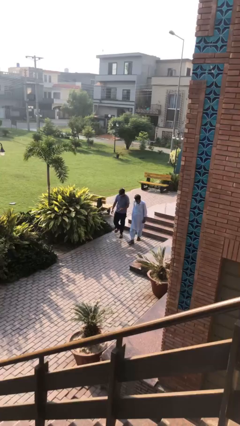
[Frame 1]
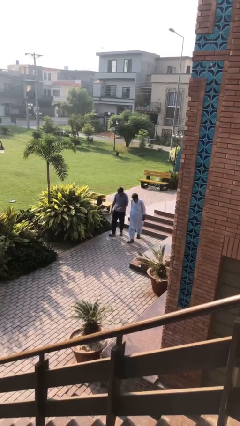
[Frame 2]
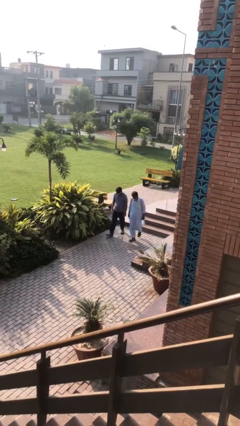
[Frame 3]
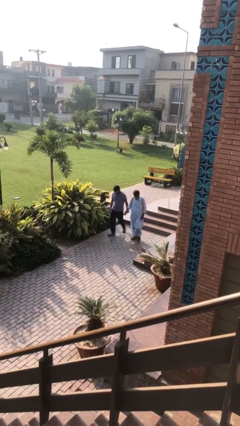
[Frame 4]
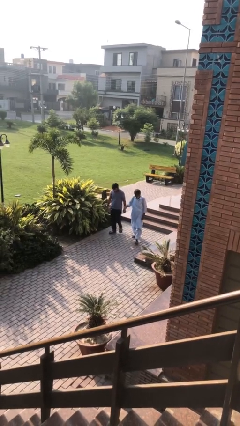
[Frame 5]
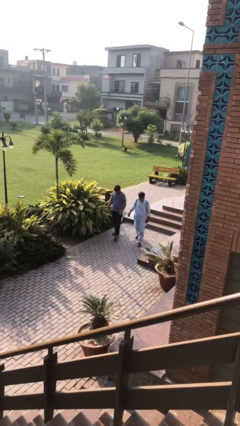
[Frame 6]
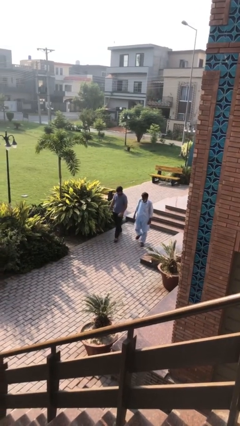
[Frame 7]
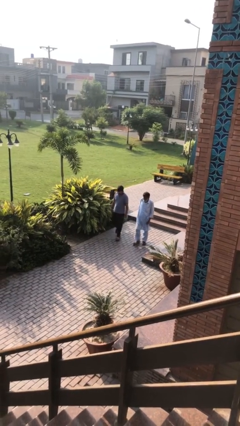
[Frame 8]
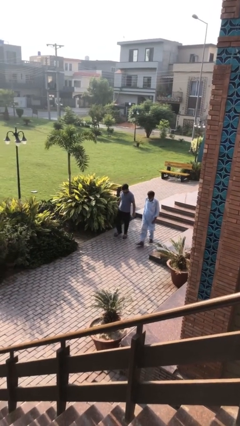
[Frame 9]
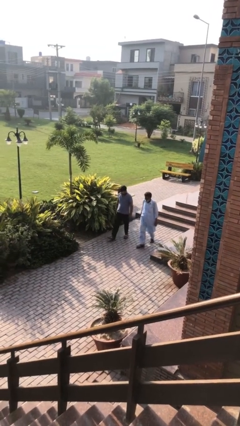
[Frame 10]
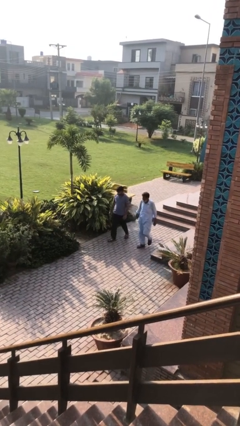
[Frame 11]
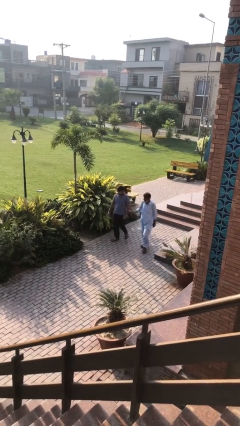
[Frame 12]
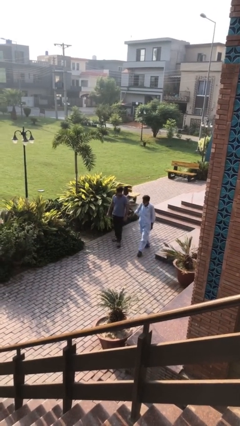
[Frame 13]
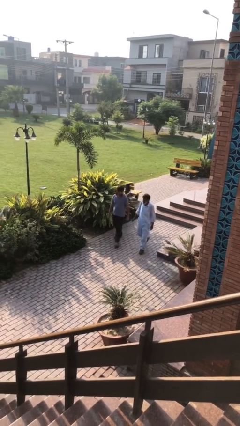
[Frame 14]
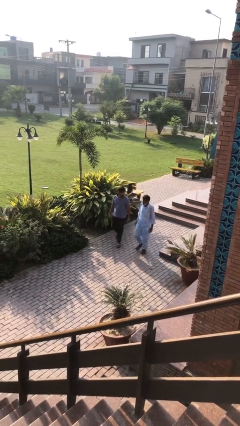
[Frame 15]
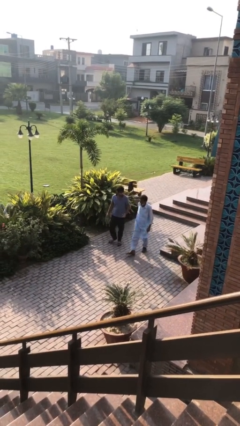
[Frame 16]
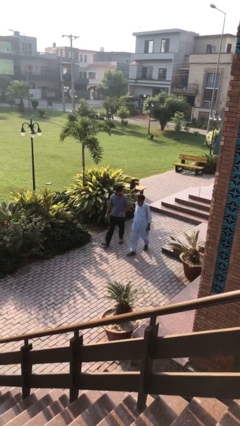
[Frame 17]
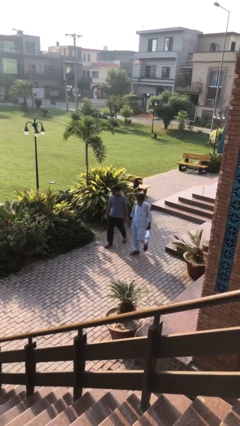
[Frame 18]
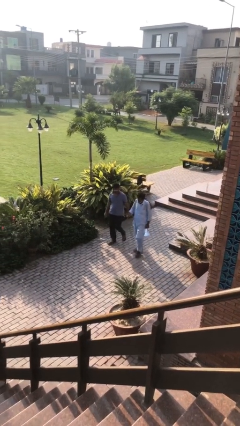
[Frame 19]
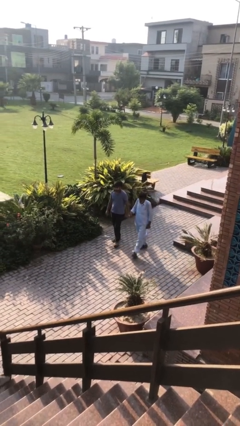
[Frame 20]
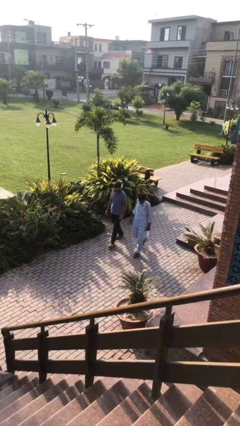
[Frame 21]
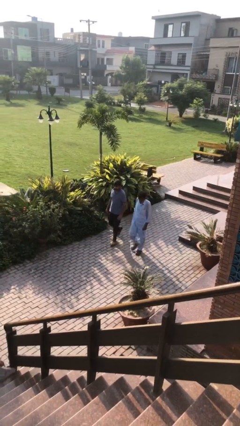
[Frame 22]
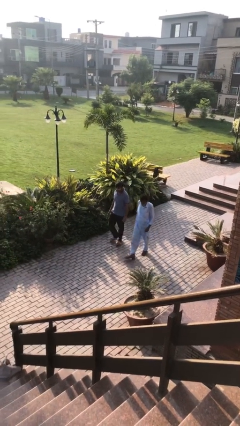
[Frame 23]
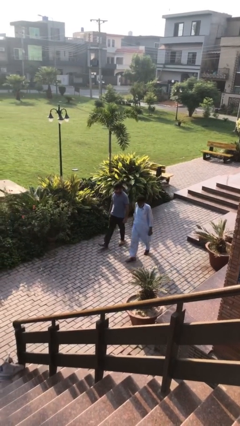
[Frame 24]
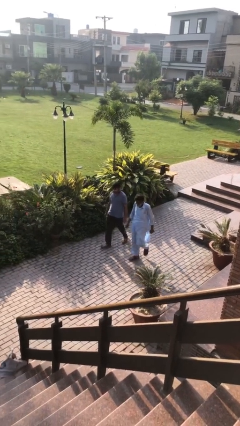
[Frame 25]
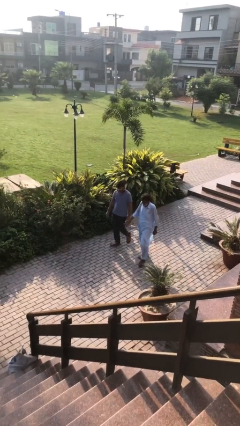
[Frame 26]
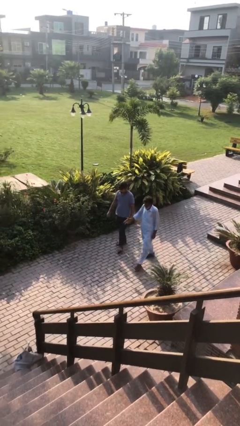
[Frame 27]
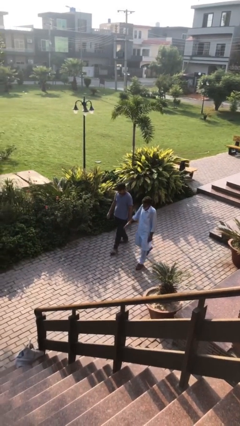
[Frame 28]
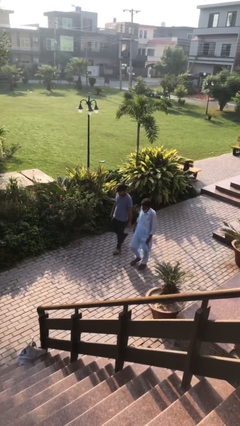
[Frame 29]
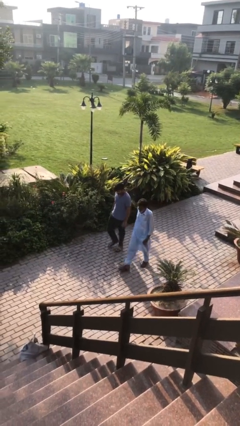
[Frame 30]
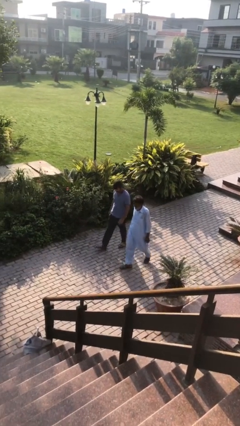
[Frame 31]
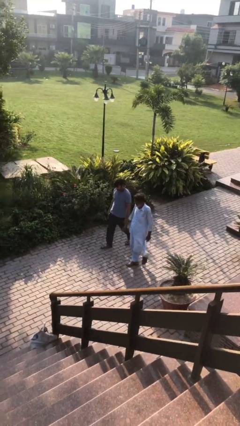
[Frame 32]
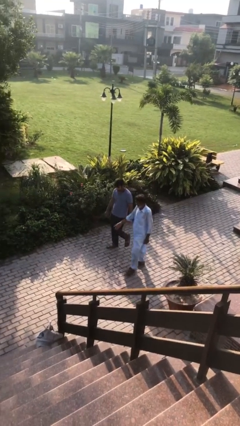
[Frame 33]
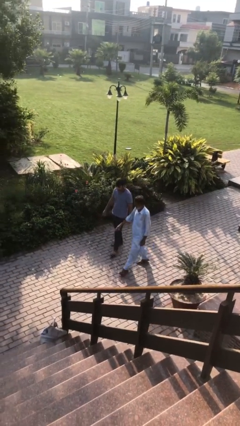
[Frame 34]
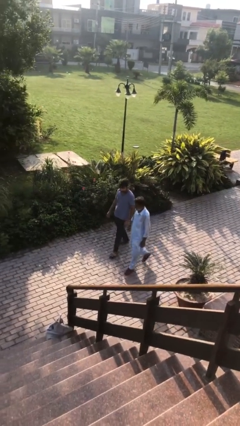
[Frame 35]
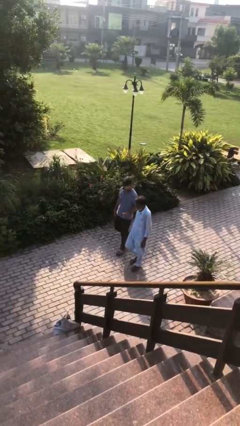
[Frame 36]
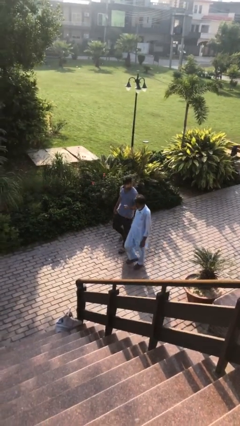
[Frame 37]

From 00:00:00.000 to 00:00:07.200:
person talks to person

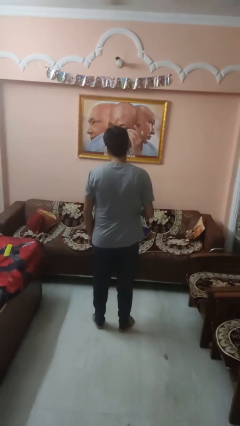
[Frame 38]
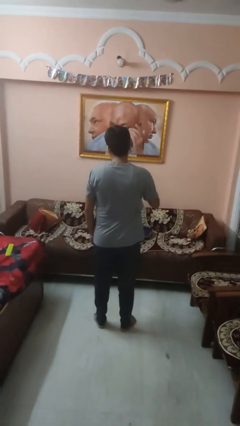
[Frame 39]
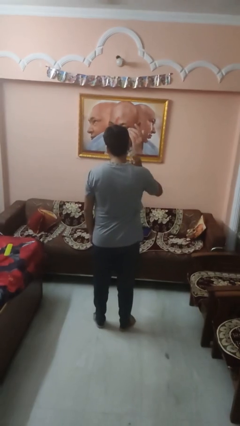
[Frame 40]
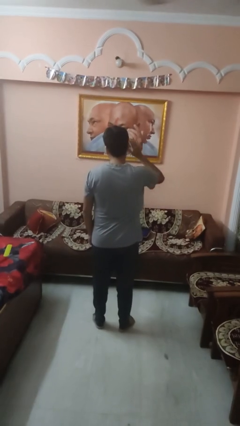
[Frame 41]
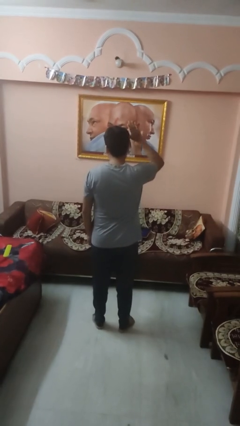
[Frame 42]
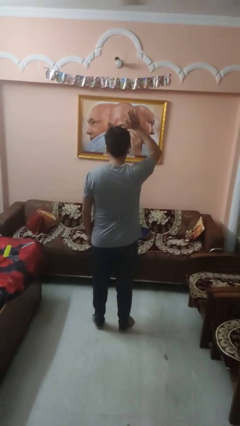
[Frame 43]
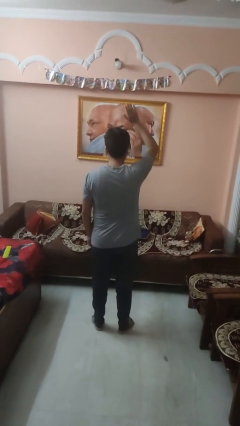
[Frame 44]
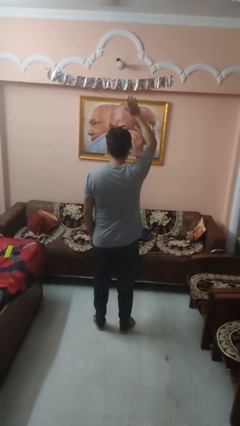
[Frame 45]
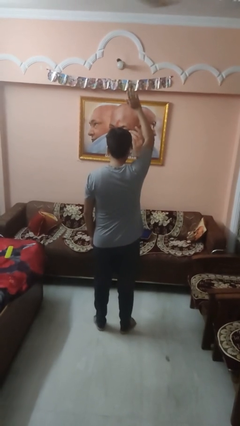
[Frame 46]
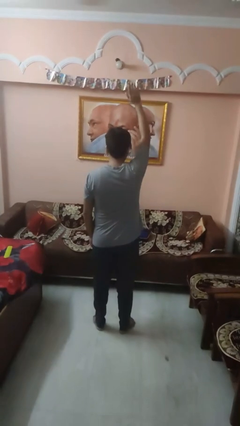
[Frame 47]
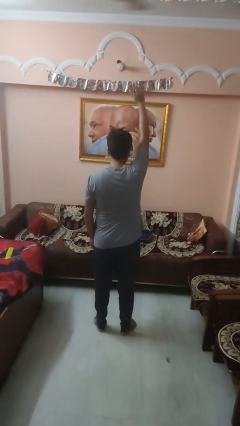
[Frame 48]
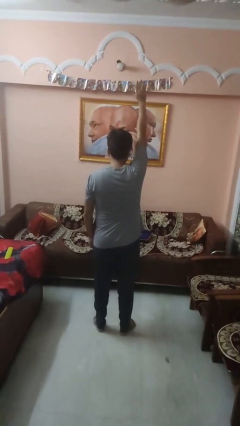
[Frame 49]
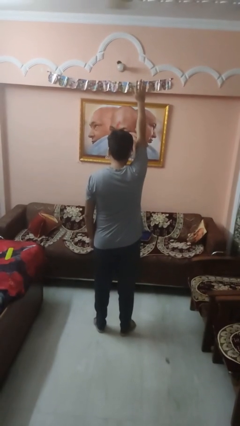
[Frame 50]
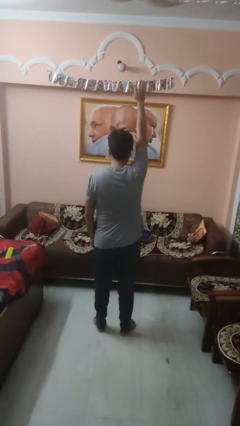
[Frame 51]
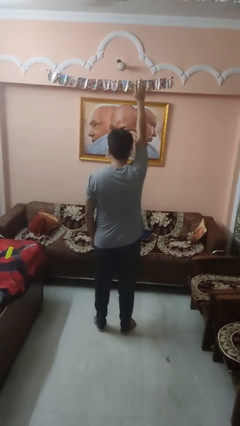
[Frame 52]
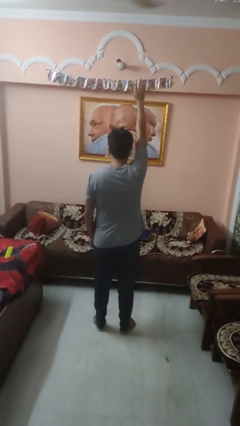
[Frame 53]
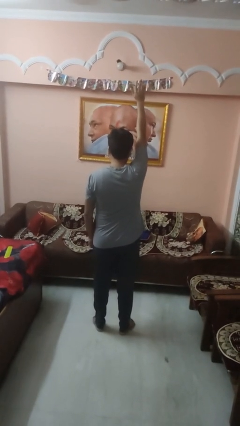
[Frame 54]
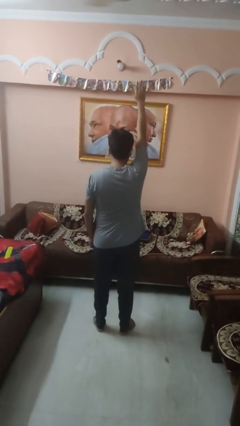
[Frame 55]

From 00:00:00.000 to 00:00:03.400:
person gestures raise hand

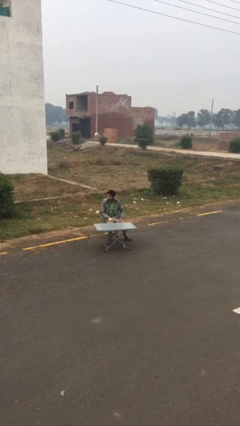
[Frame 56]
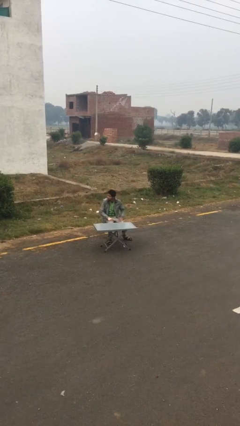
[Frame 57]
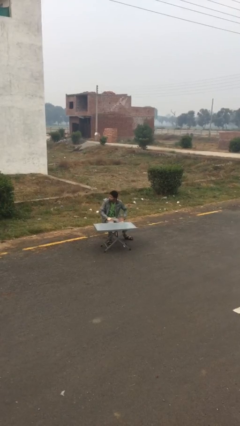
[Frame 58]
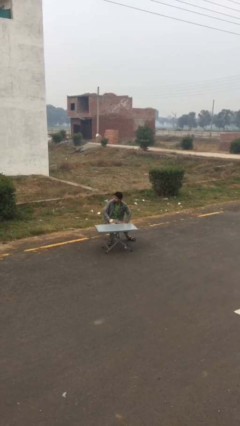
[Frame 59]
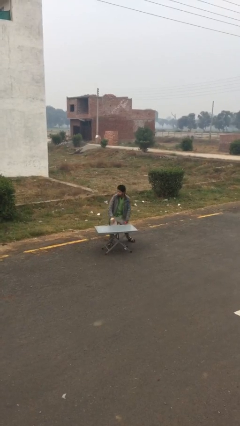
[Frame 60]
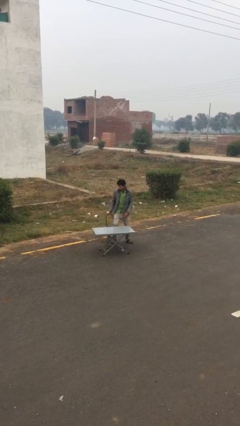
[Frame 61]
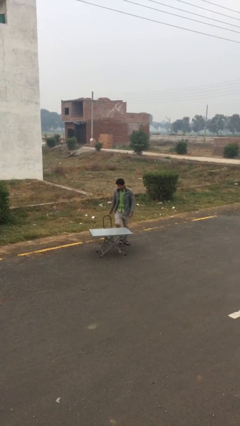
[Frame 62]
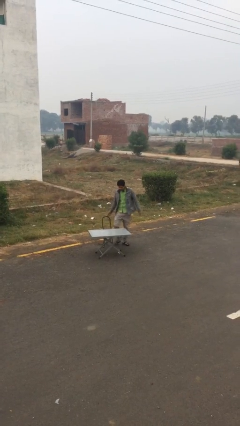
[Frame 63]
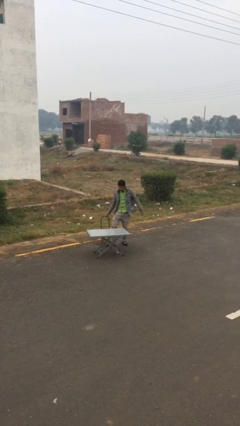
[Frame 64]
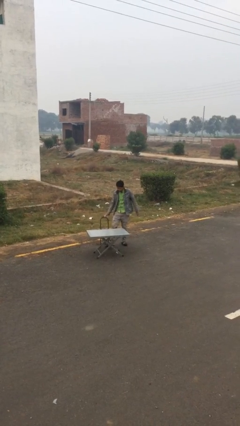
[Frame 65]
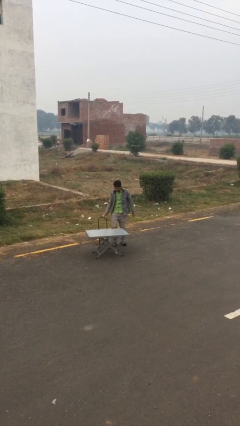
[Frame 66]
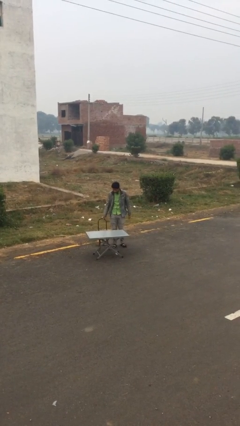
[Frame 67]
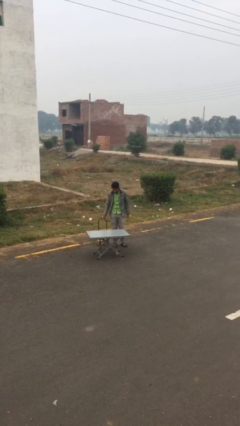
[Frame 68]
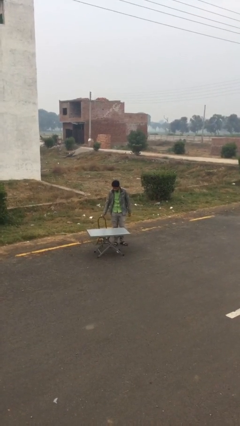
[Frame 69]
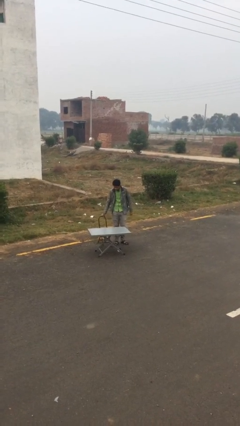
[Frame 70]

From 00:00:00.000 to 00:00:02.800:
person stands up

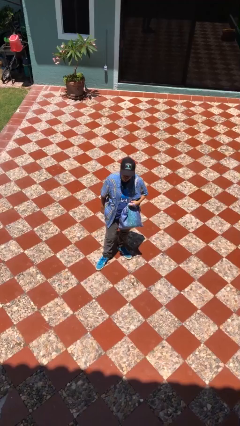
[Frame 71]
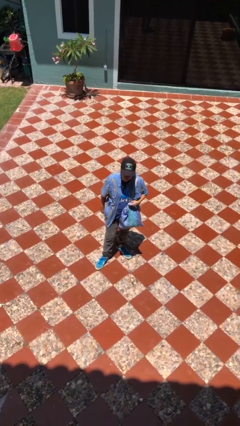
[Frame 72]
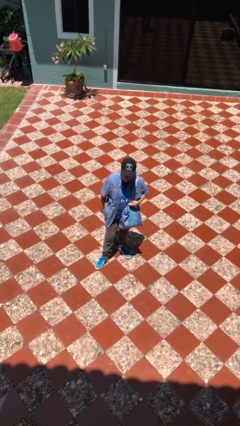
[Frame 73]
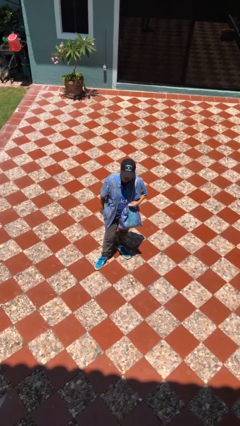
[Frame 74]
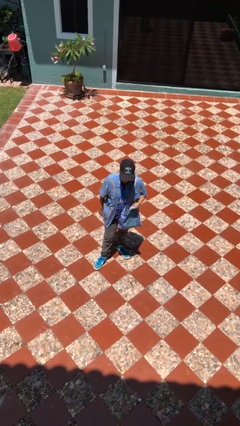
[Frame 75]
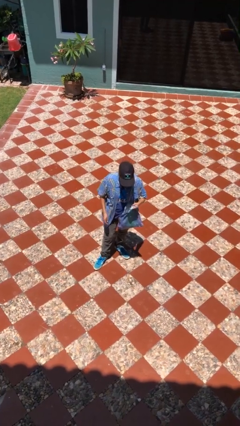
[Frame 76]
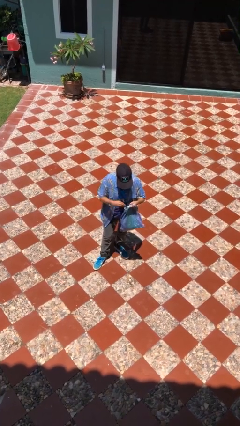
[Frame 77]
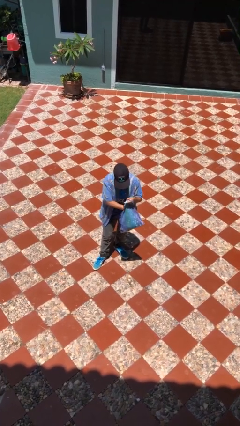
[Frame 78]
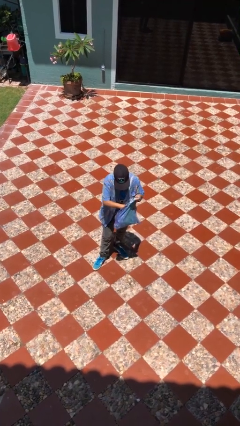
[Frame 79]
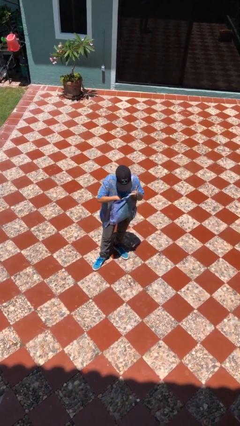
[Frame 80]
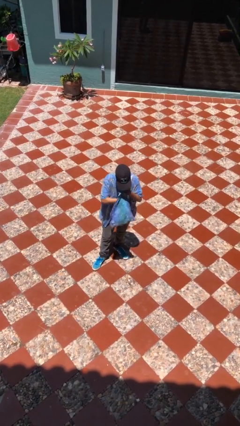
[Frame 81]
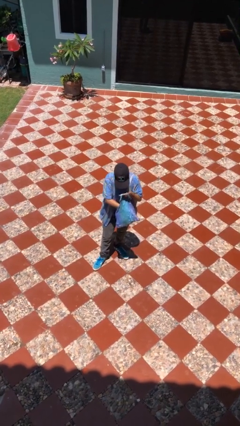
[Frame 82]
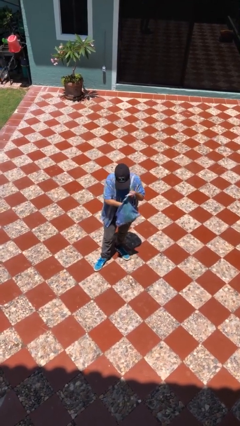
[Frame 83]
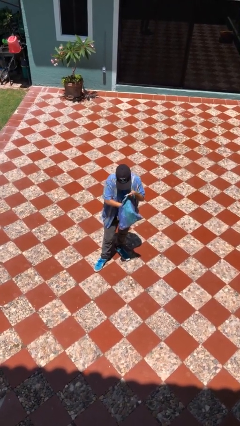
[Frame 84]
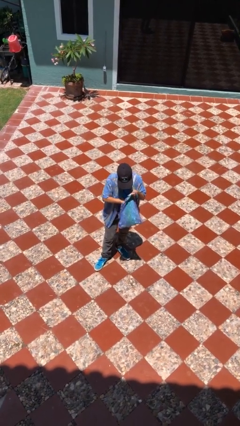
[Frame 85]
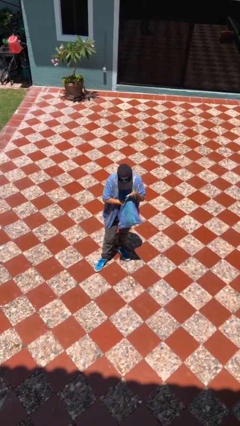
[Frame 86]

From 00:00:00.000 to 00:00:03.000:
person searches in purse

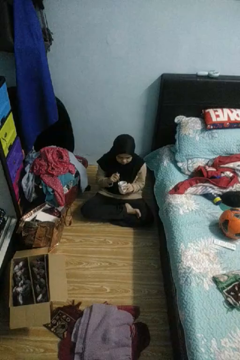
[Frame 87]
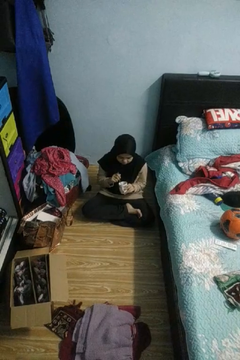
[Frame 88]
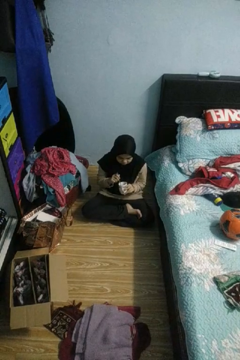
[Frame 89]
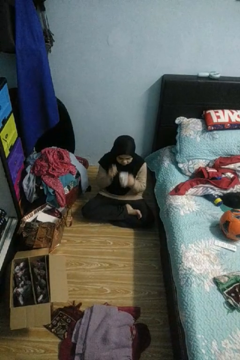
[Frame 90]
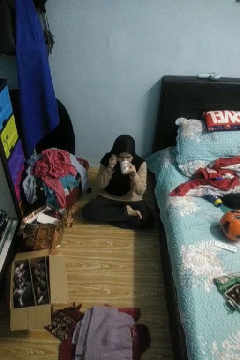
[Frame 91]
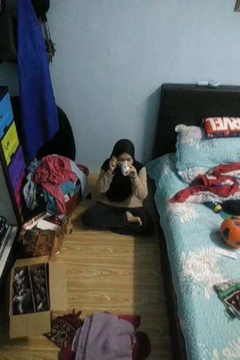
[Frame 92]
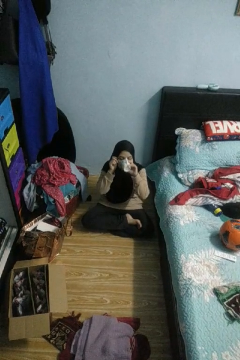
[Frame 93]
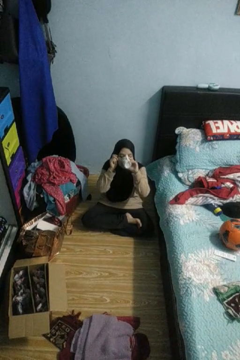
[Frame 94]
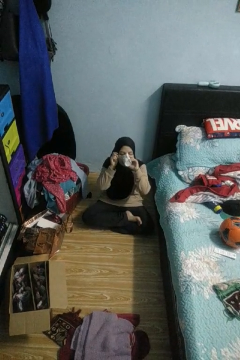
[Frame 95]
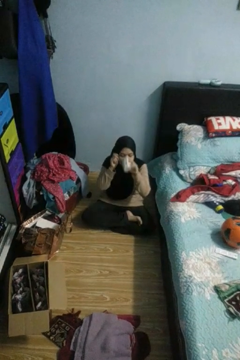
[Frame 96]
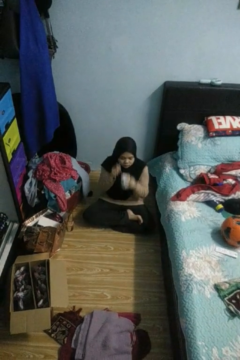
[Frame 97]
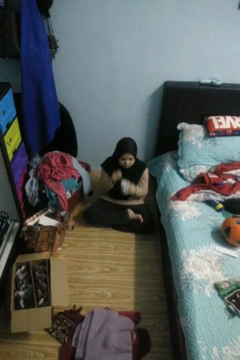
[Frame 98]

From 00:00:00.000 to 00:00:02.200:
person drinks from mug
